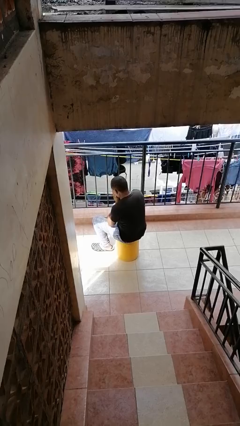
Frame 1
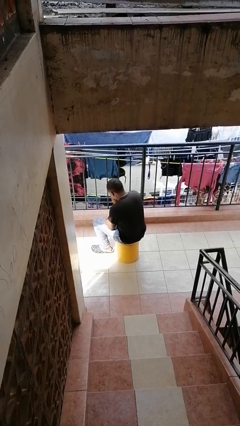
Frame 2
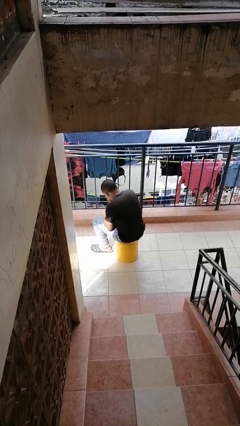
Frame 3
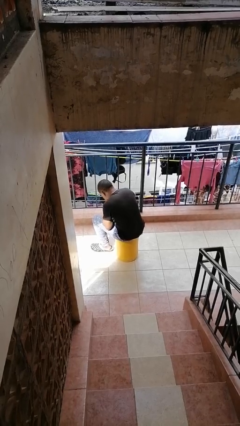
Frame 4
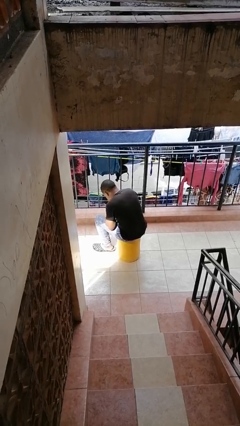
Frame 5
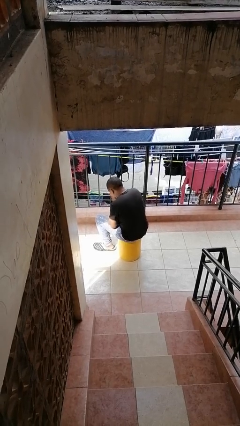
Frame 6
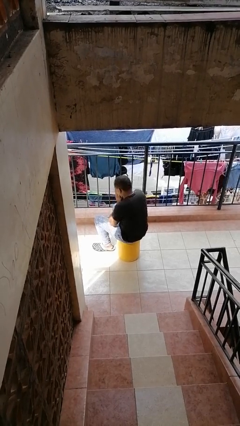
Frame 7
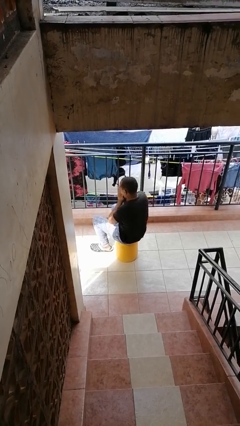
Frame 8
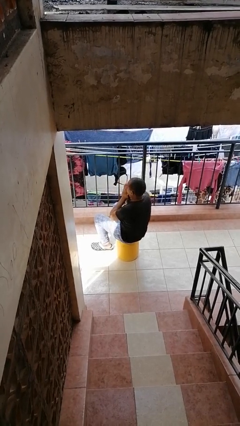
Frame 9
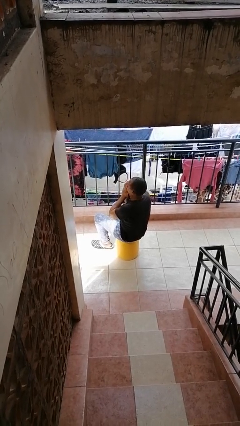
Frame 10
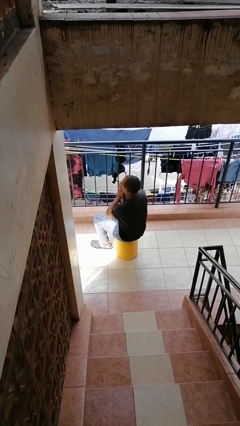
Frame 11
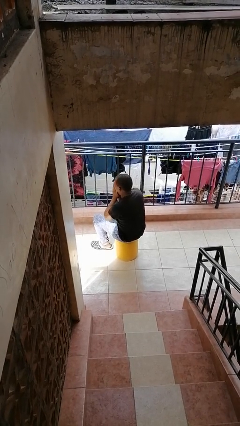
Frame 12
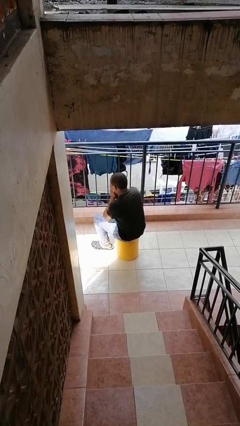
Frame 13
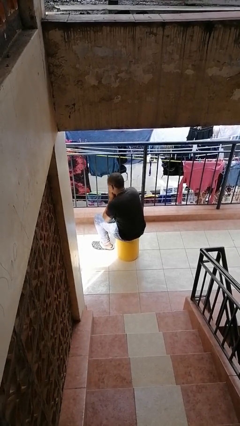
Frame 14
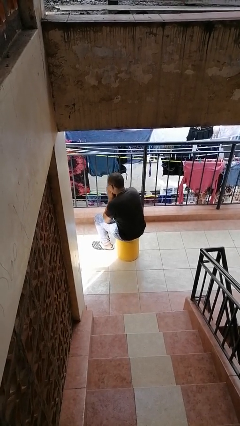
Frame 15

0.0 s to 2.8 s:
person blows into hands

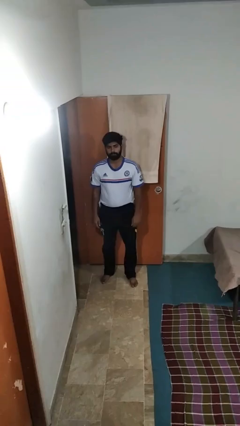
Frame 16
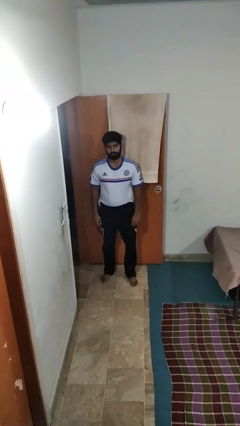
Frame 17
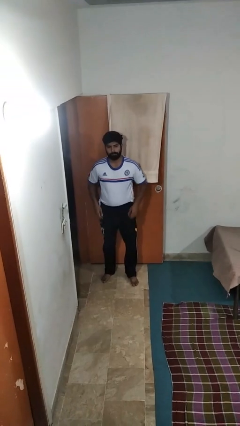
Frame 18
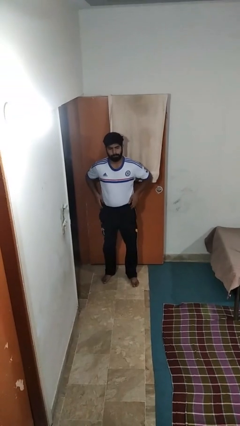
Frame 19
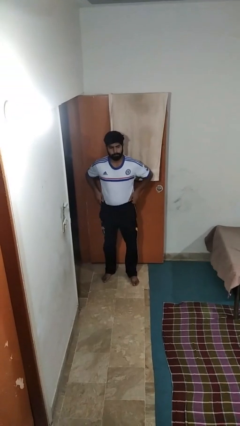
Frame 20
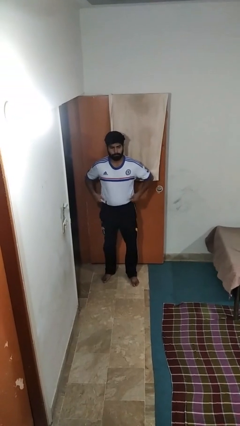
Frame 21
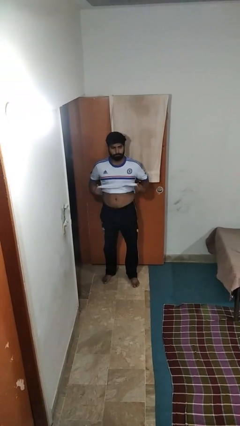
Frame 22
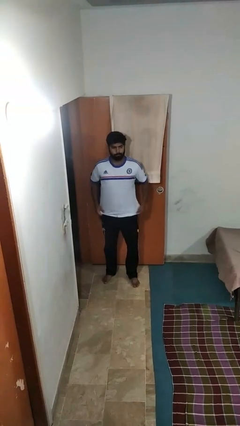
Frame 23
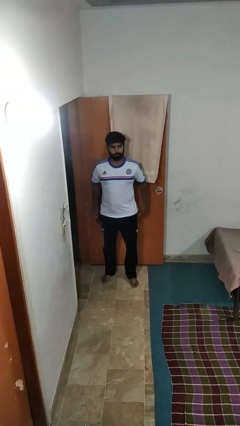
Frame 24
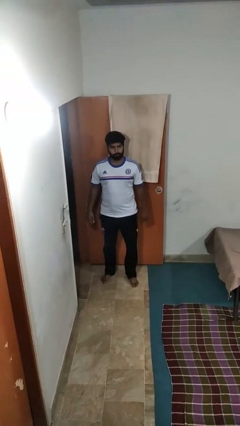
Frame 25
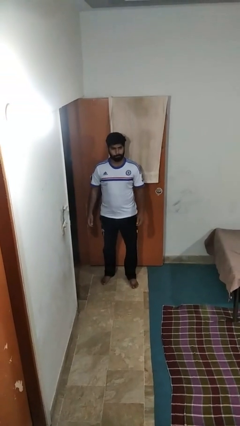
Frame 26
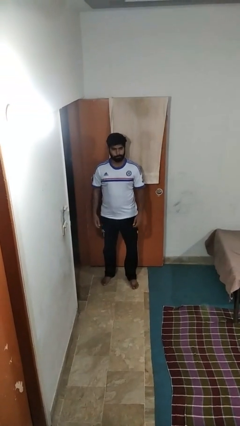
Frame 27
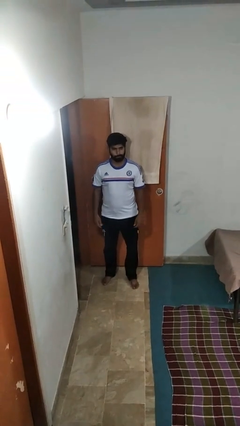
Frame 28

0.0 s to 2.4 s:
person untucks shirt

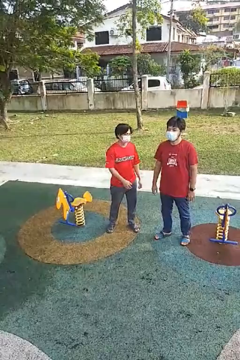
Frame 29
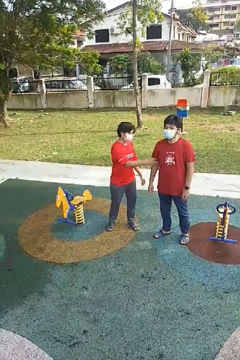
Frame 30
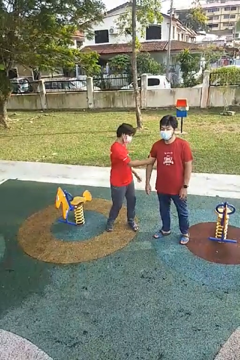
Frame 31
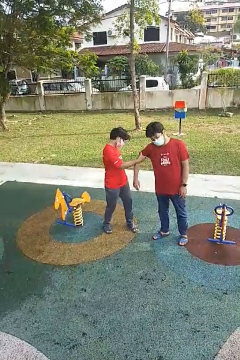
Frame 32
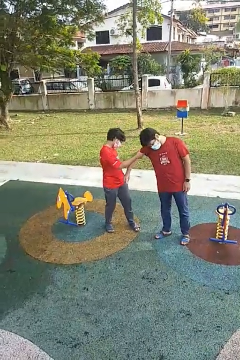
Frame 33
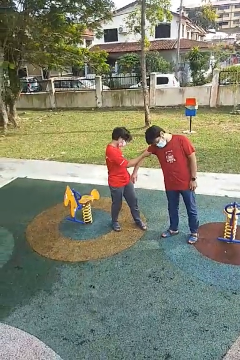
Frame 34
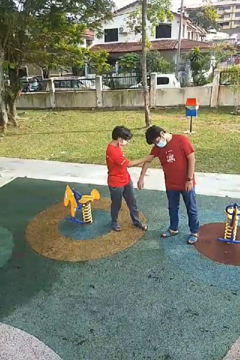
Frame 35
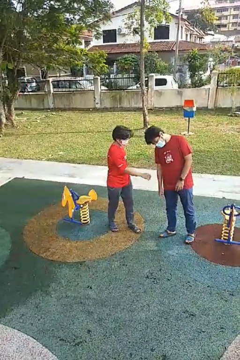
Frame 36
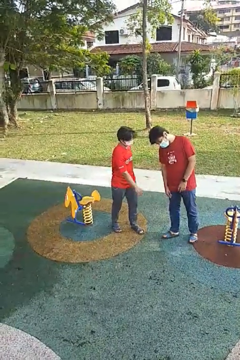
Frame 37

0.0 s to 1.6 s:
person grabs person by bicep

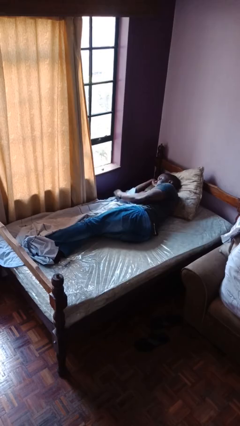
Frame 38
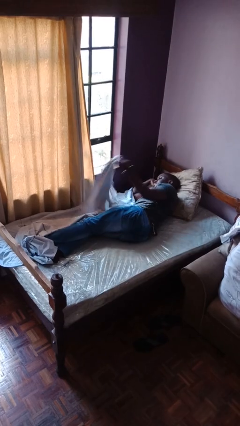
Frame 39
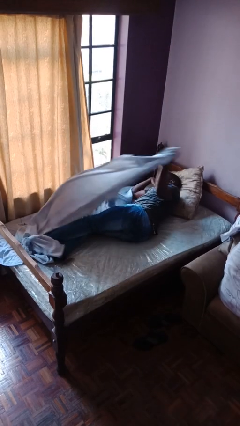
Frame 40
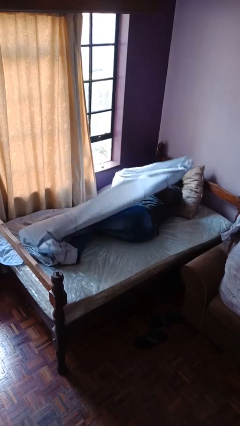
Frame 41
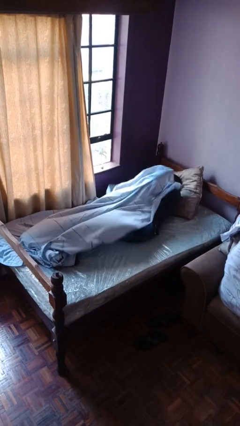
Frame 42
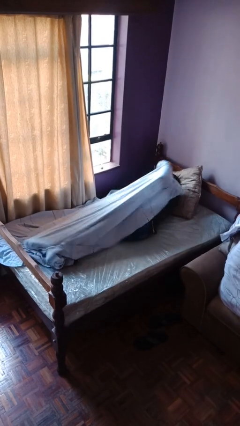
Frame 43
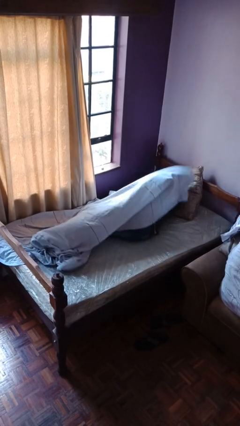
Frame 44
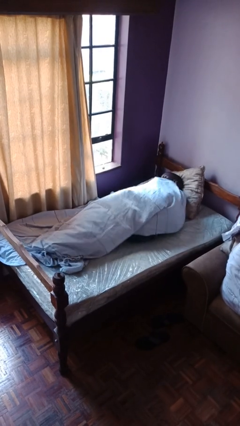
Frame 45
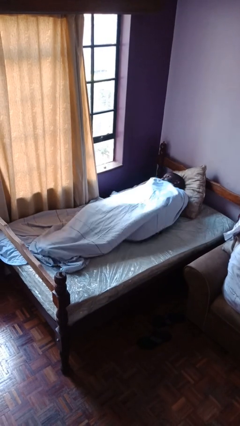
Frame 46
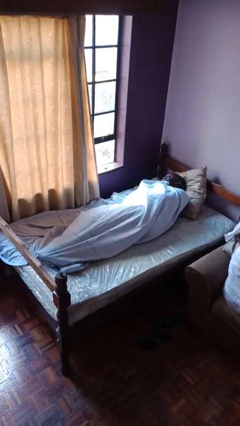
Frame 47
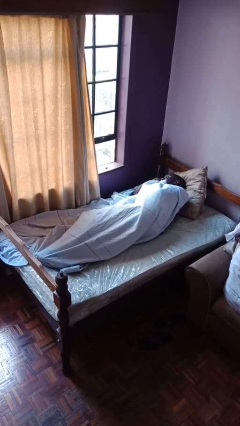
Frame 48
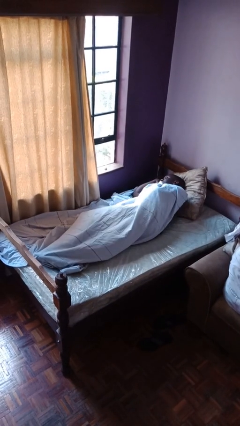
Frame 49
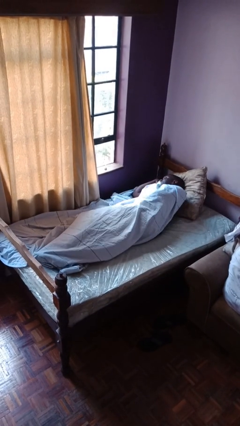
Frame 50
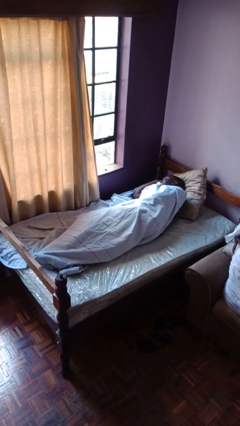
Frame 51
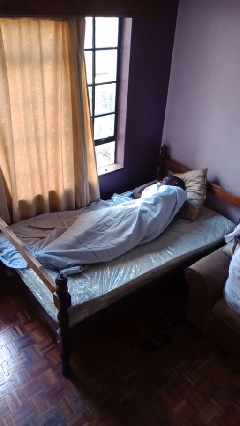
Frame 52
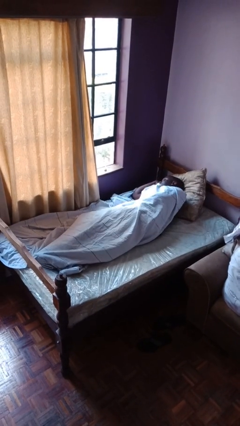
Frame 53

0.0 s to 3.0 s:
person covers with bedsheets

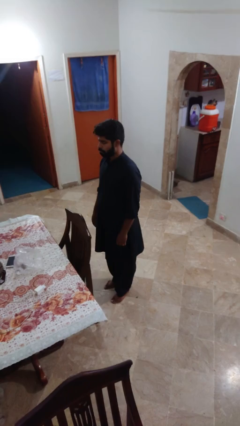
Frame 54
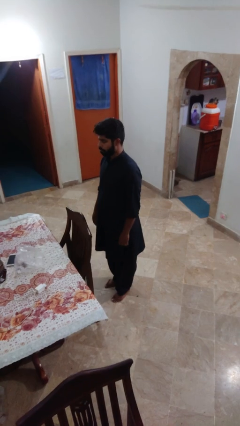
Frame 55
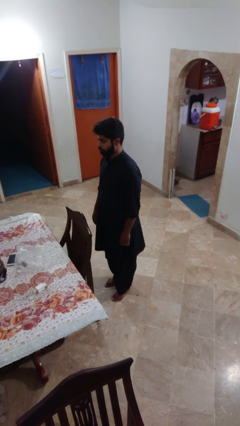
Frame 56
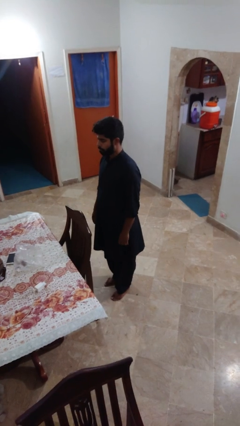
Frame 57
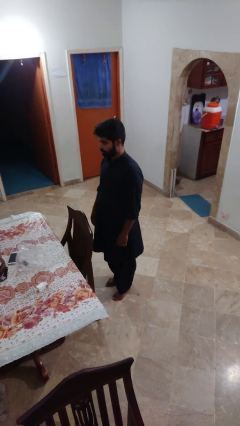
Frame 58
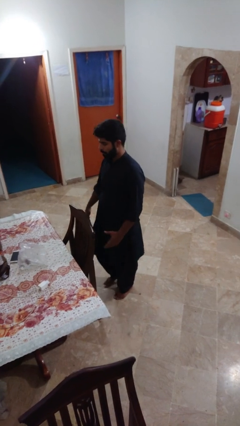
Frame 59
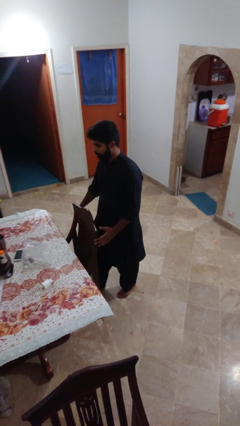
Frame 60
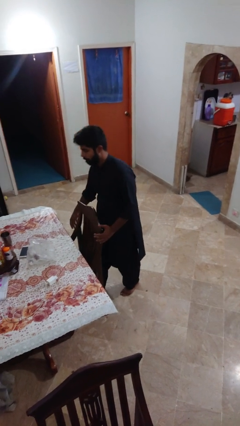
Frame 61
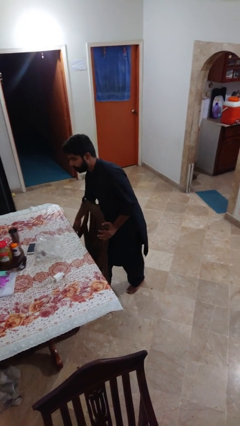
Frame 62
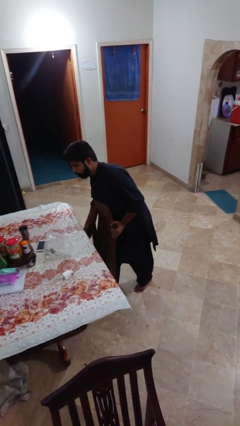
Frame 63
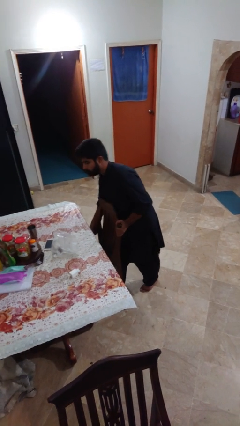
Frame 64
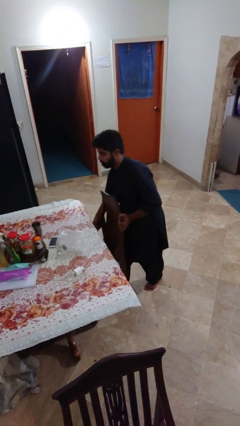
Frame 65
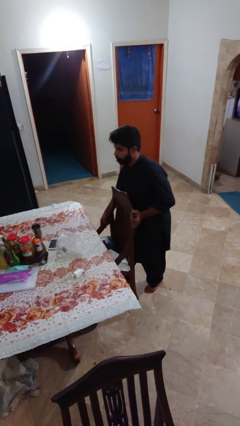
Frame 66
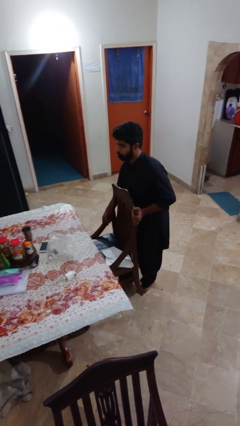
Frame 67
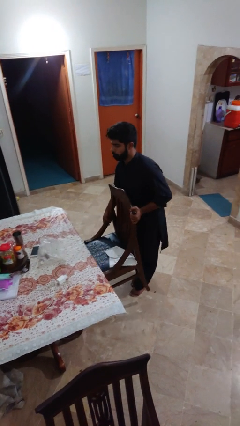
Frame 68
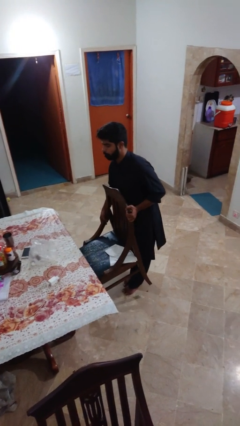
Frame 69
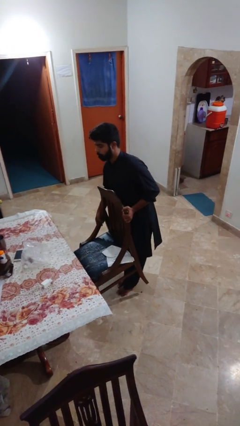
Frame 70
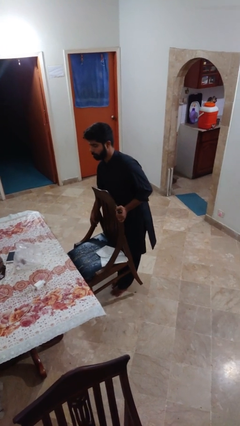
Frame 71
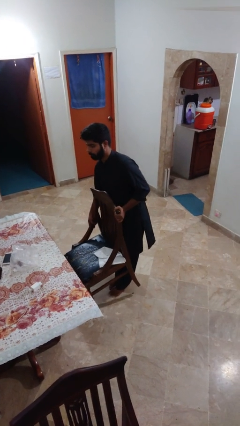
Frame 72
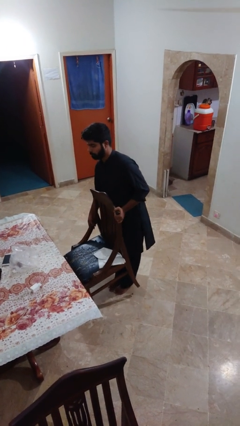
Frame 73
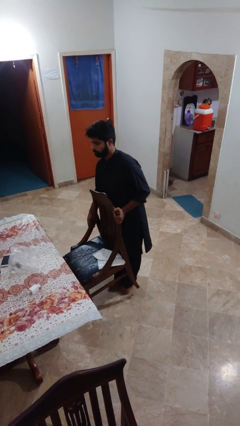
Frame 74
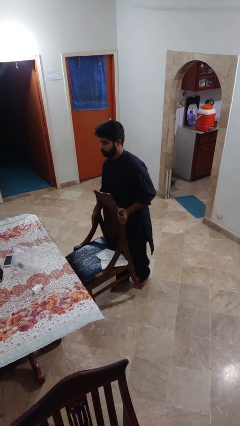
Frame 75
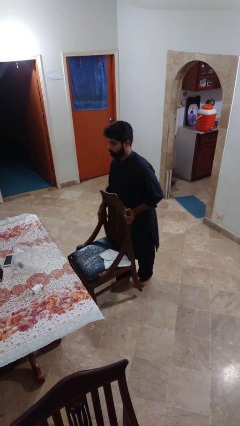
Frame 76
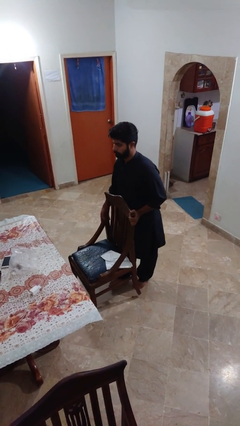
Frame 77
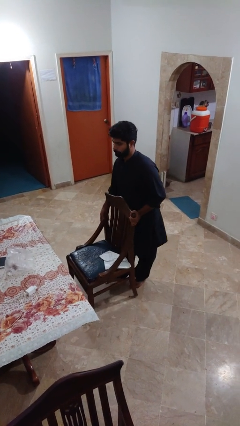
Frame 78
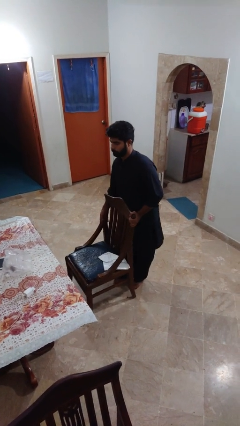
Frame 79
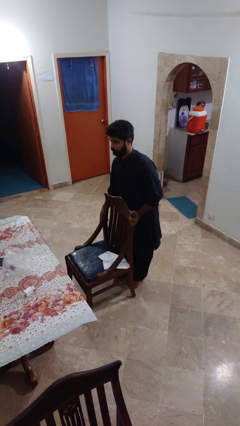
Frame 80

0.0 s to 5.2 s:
person pulls out chair

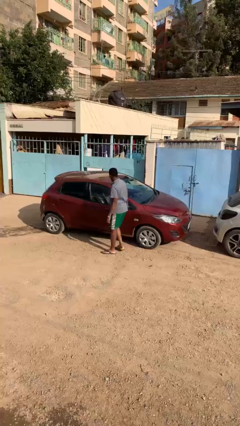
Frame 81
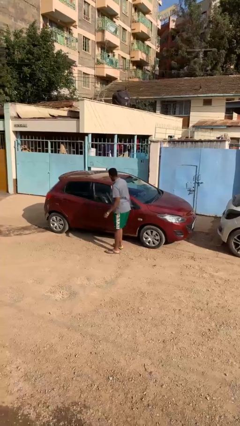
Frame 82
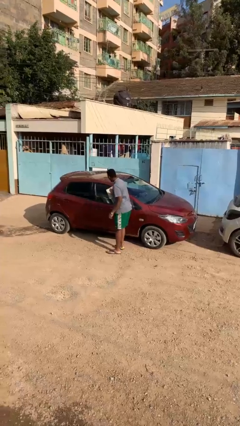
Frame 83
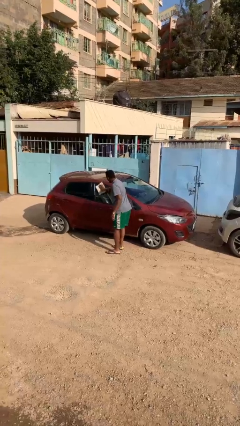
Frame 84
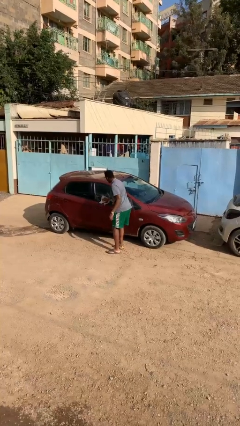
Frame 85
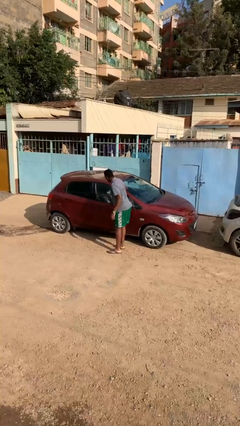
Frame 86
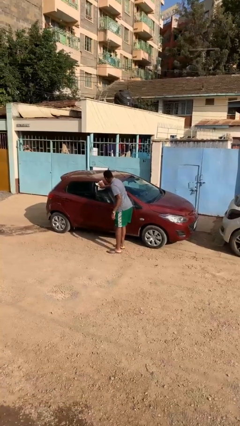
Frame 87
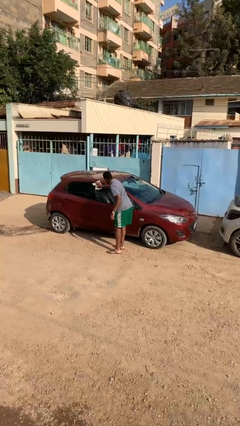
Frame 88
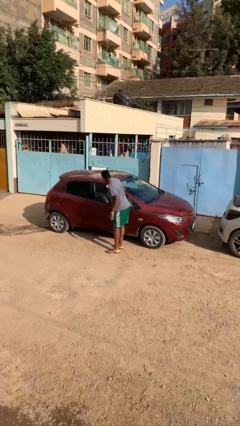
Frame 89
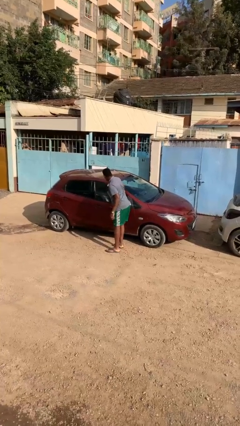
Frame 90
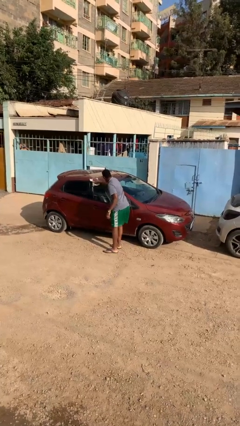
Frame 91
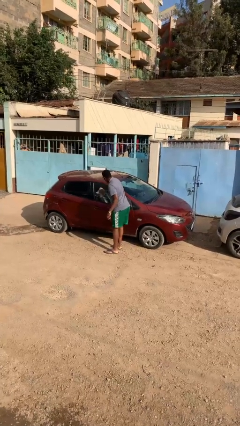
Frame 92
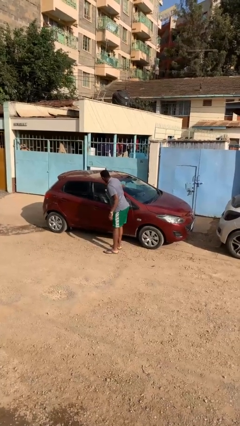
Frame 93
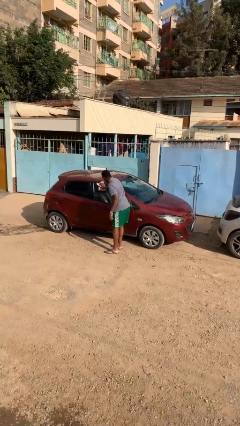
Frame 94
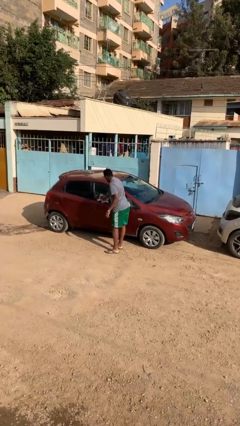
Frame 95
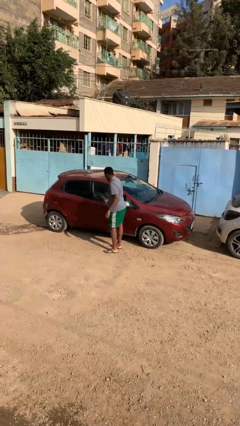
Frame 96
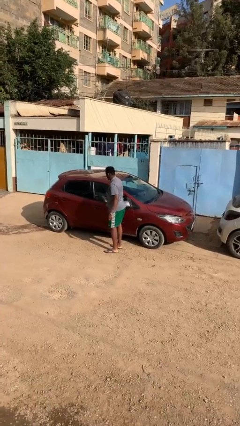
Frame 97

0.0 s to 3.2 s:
person polishes car with rag
